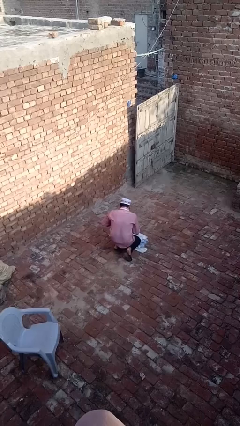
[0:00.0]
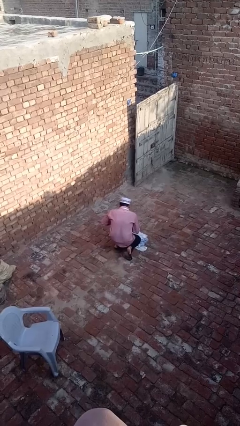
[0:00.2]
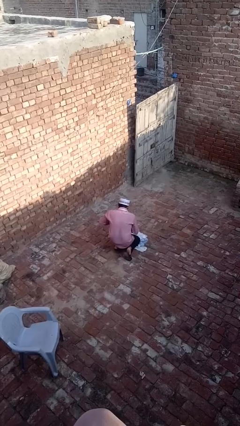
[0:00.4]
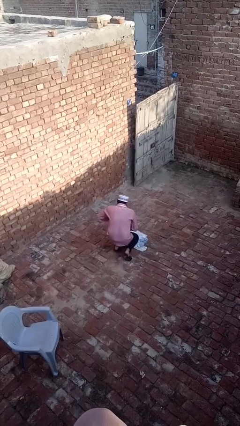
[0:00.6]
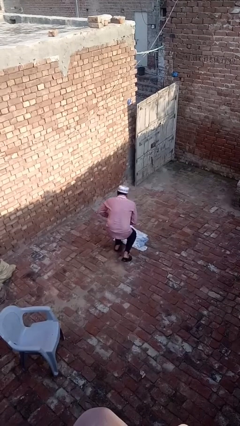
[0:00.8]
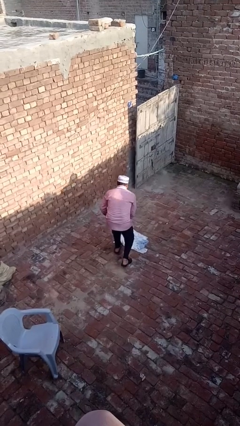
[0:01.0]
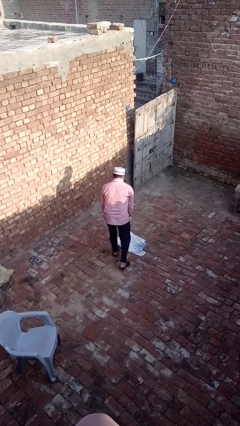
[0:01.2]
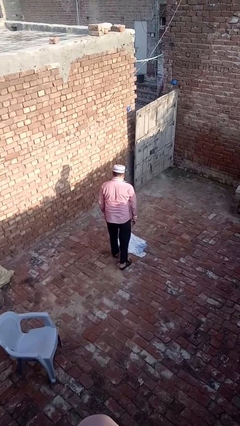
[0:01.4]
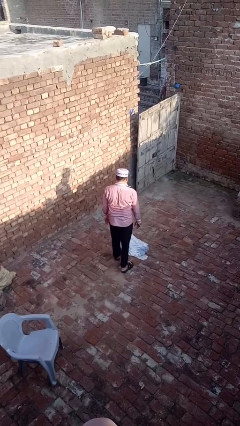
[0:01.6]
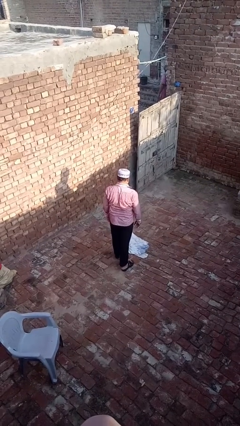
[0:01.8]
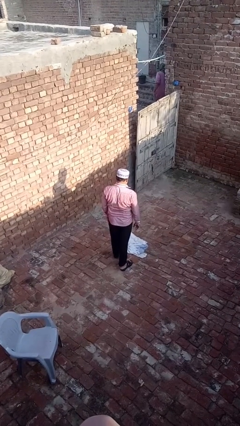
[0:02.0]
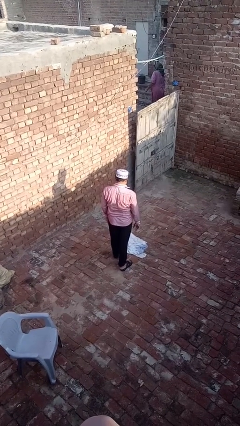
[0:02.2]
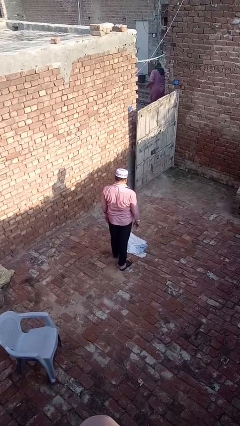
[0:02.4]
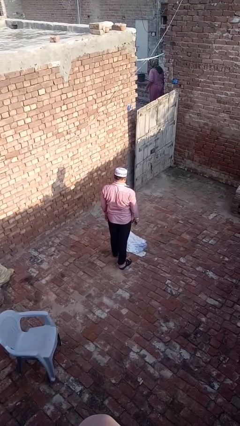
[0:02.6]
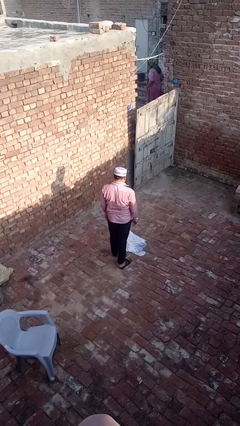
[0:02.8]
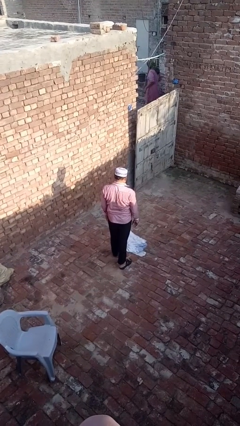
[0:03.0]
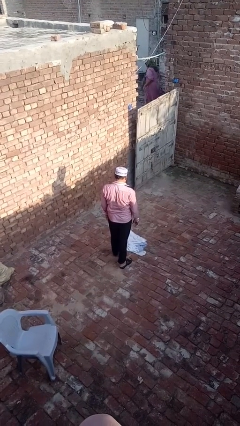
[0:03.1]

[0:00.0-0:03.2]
person stands up from floor

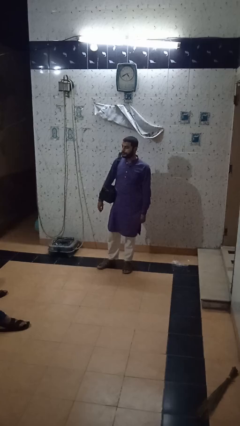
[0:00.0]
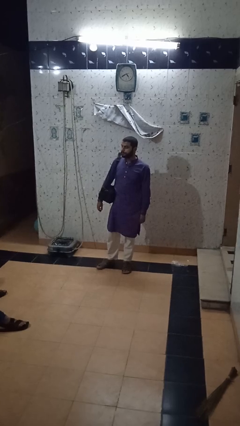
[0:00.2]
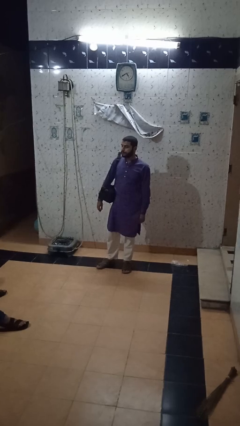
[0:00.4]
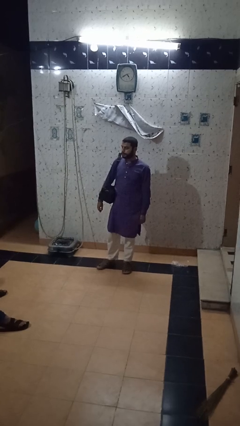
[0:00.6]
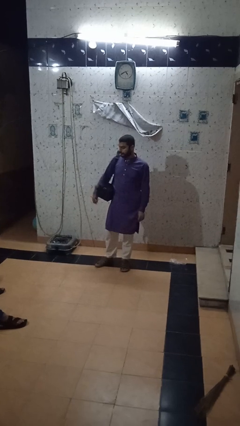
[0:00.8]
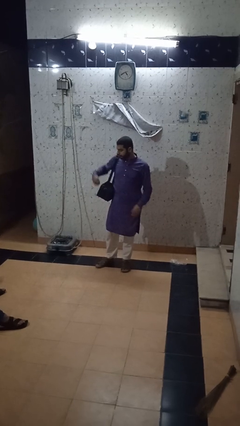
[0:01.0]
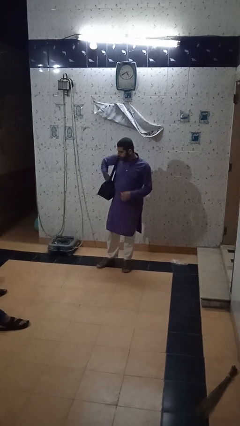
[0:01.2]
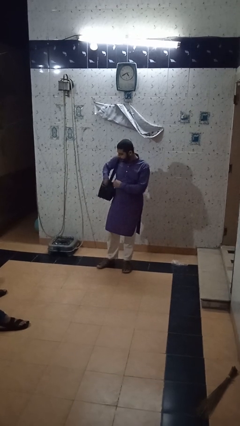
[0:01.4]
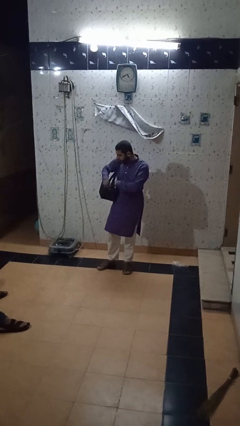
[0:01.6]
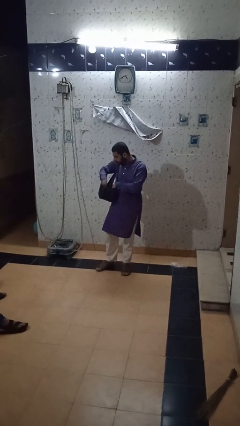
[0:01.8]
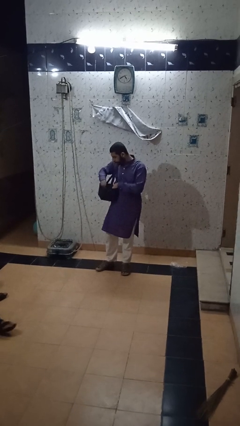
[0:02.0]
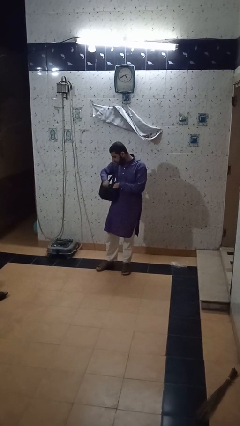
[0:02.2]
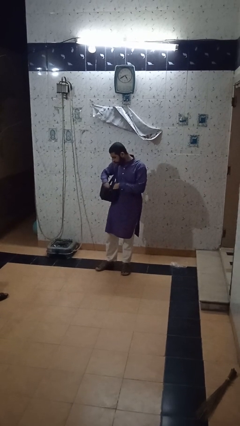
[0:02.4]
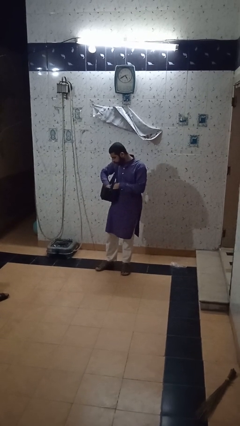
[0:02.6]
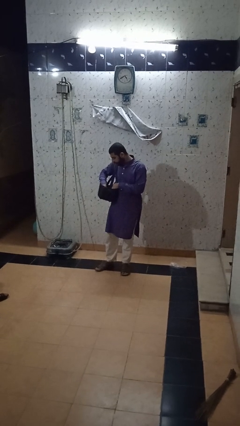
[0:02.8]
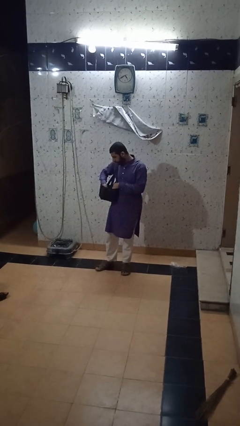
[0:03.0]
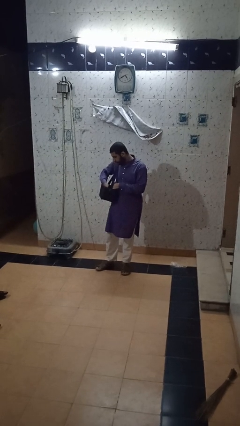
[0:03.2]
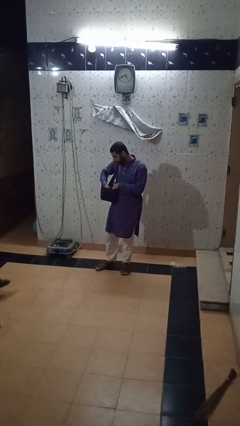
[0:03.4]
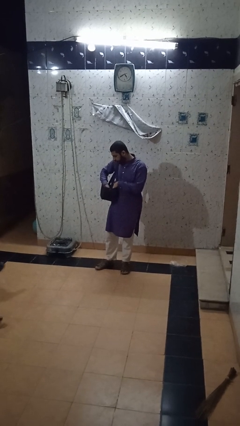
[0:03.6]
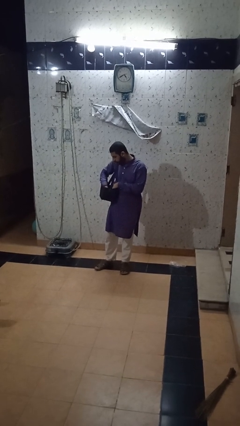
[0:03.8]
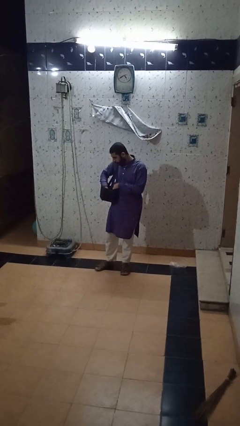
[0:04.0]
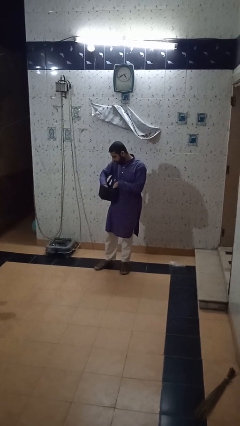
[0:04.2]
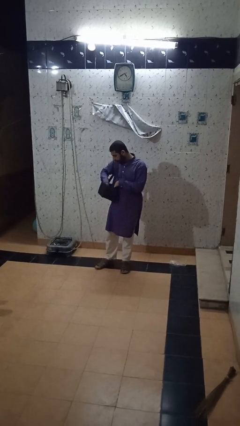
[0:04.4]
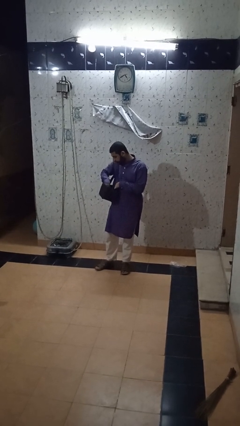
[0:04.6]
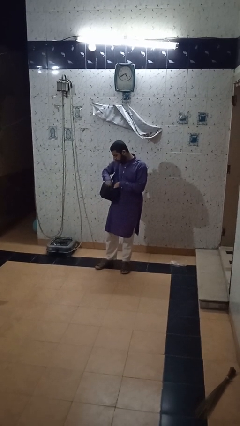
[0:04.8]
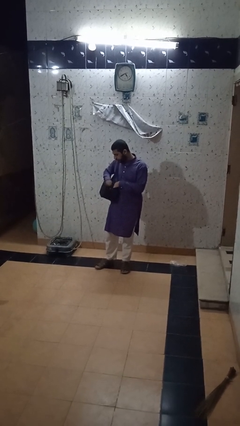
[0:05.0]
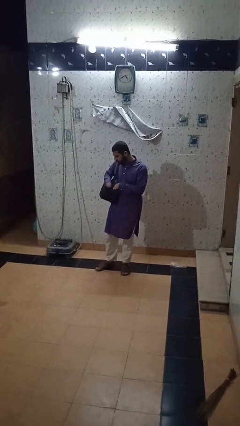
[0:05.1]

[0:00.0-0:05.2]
person searches in backpack

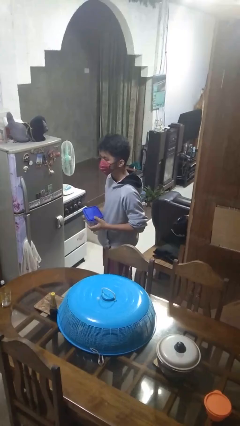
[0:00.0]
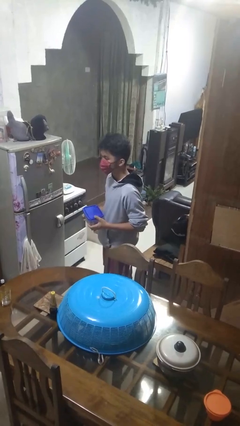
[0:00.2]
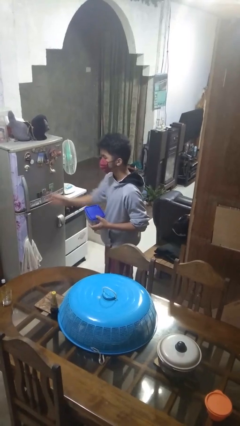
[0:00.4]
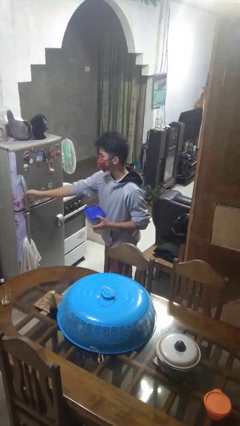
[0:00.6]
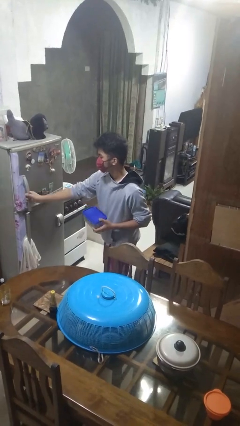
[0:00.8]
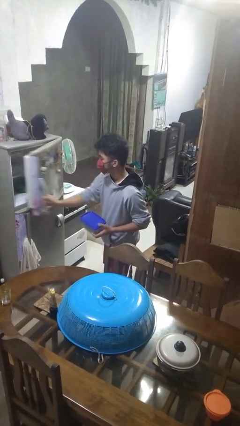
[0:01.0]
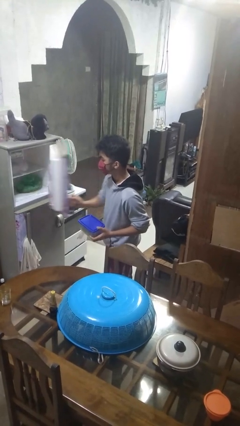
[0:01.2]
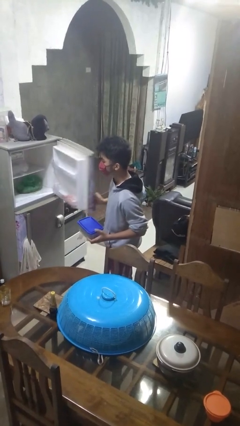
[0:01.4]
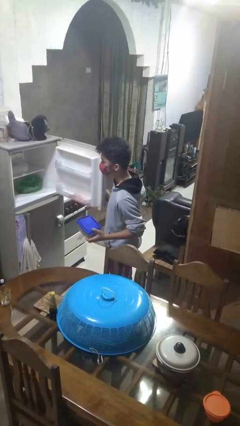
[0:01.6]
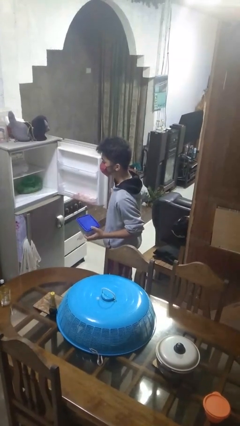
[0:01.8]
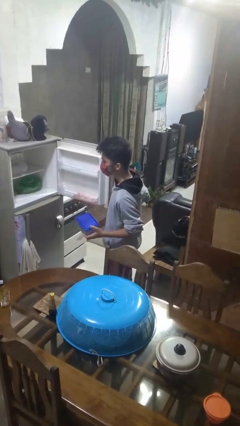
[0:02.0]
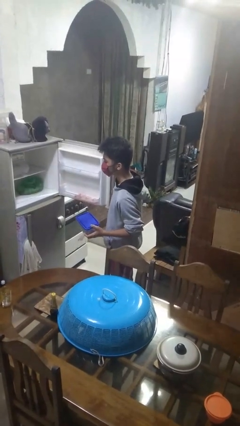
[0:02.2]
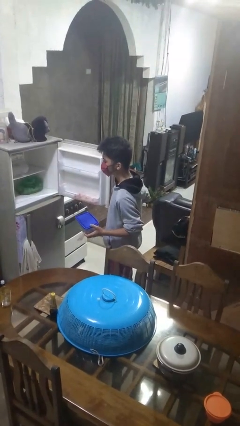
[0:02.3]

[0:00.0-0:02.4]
person opens refrigerator

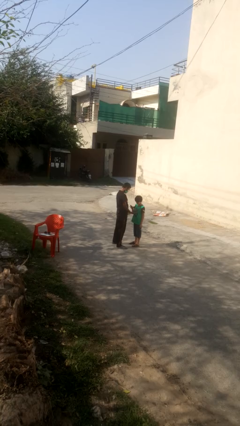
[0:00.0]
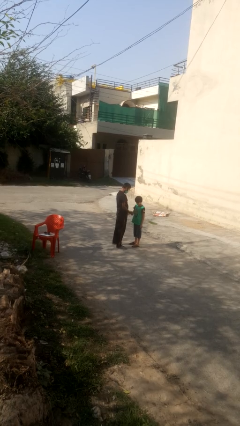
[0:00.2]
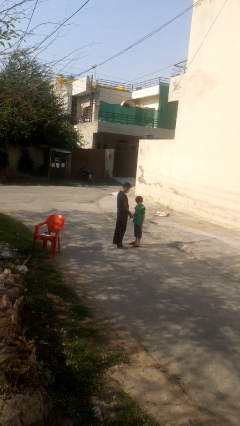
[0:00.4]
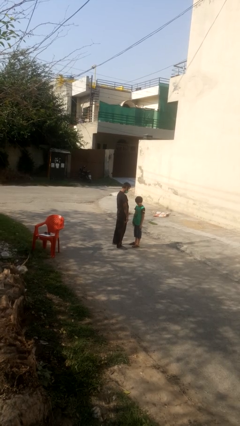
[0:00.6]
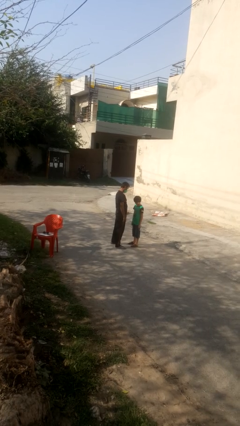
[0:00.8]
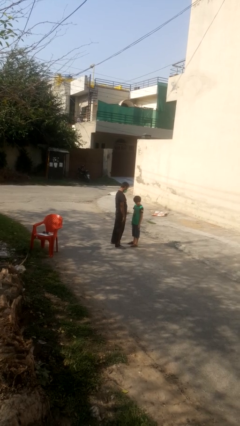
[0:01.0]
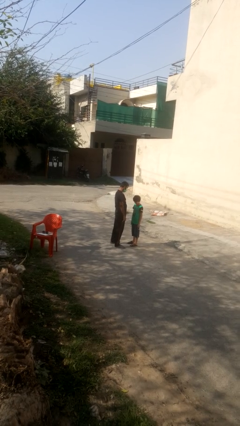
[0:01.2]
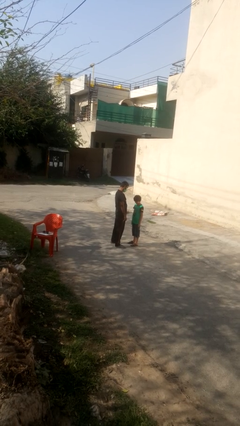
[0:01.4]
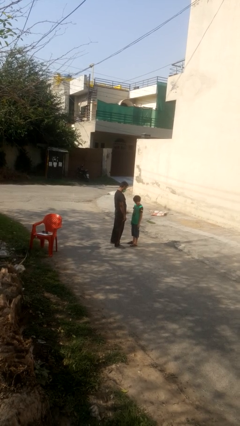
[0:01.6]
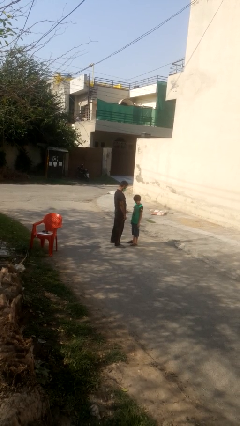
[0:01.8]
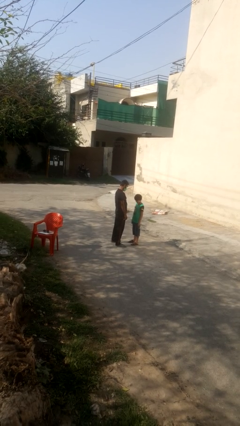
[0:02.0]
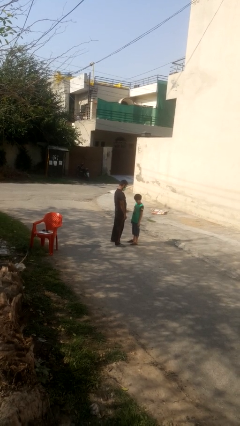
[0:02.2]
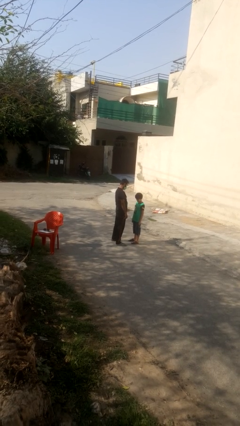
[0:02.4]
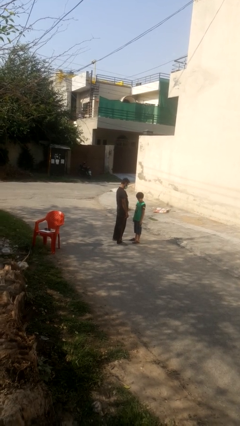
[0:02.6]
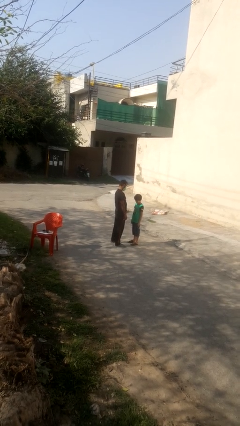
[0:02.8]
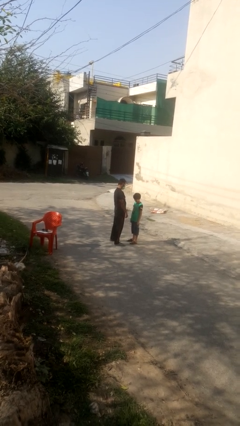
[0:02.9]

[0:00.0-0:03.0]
person highfives hand

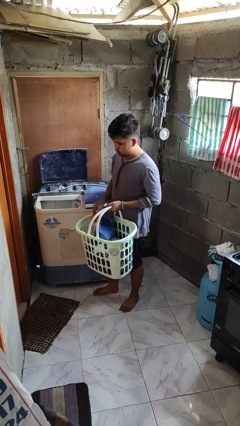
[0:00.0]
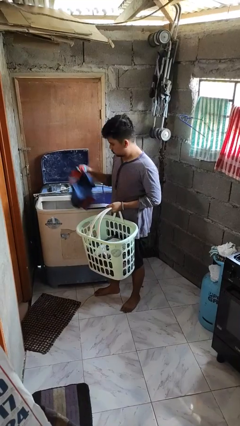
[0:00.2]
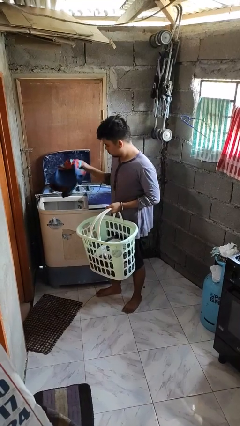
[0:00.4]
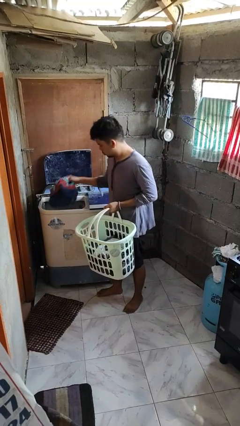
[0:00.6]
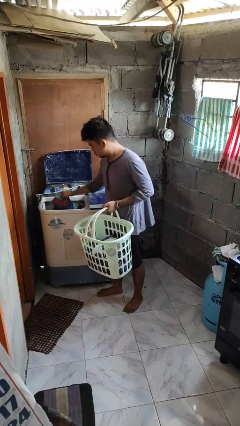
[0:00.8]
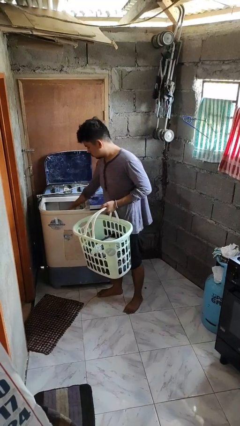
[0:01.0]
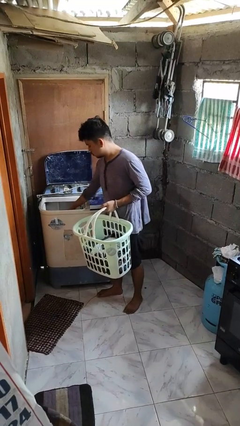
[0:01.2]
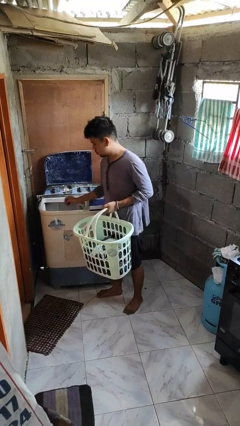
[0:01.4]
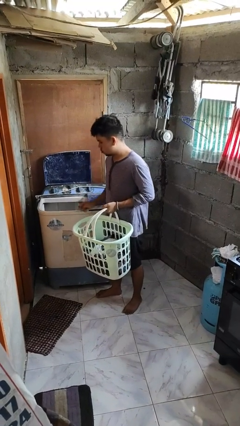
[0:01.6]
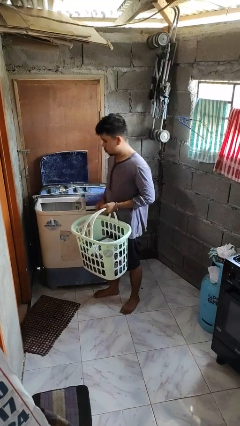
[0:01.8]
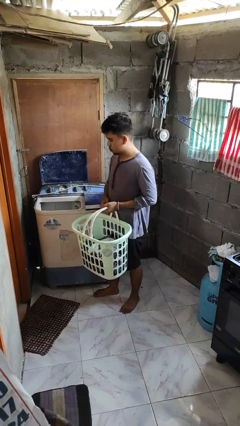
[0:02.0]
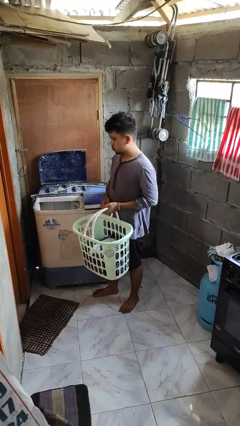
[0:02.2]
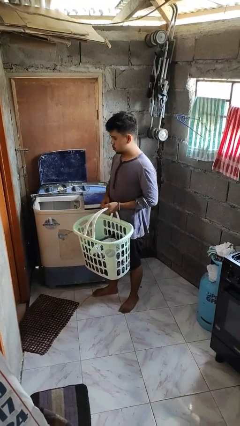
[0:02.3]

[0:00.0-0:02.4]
person loads clotheswasher

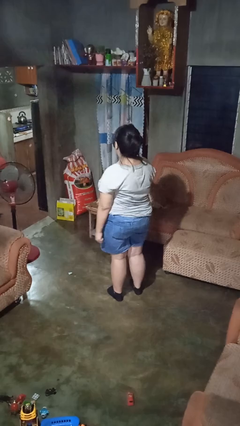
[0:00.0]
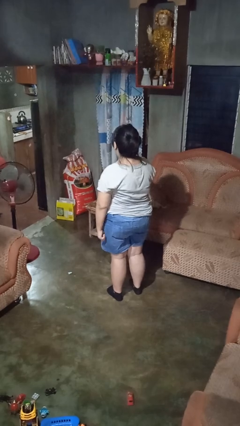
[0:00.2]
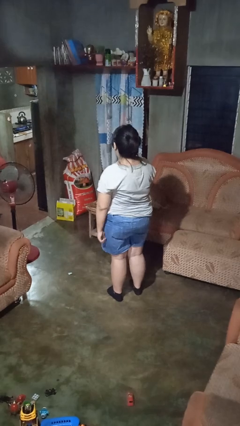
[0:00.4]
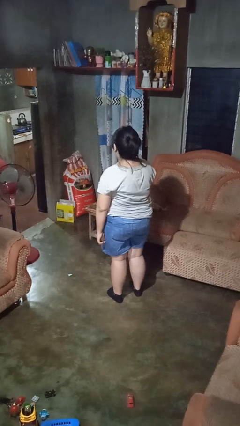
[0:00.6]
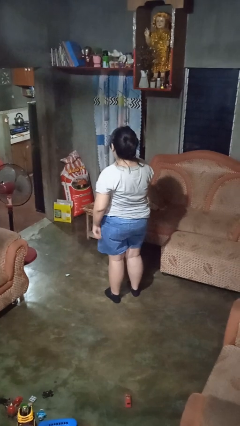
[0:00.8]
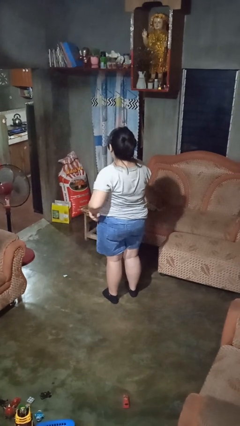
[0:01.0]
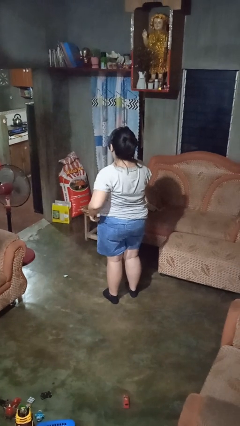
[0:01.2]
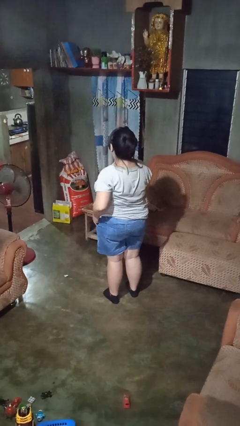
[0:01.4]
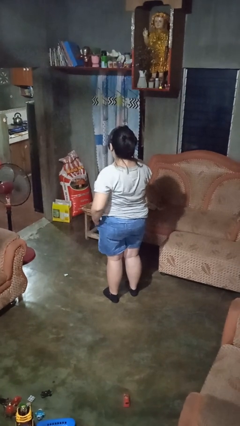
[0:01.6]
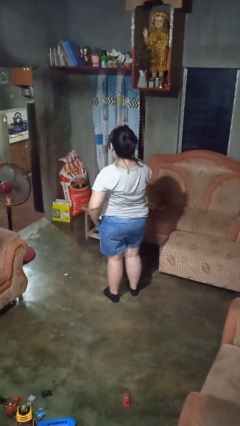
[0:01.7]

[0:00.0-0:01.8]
person puts hands in back pockets
